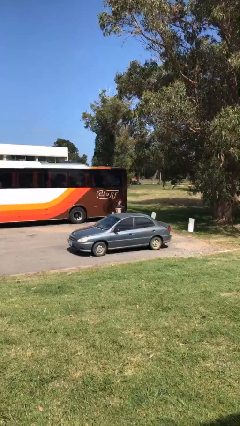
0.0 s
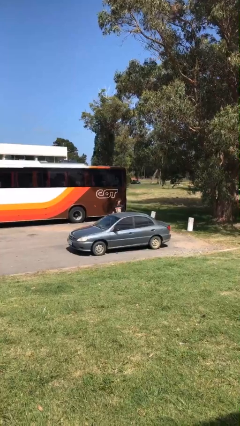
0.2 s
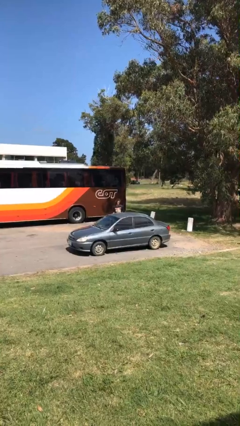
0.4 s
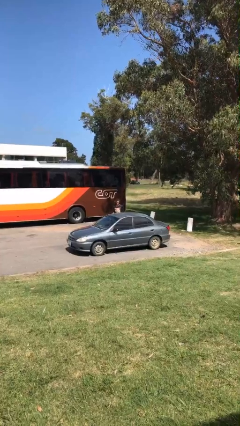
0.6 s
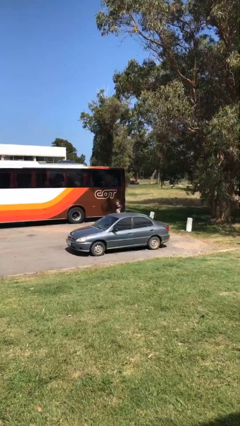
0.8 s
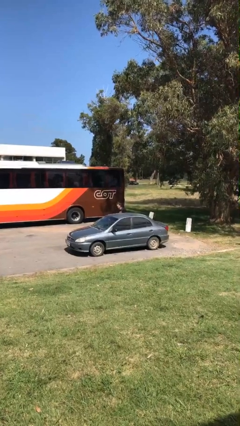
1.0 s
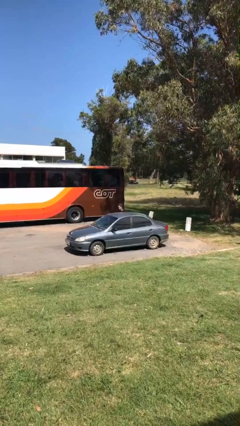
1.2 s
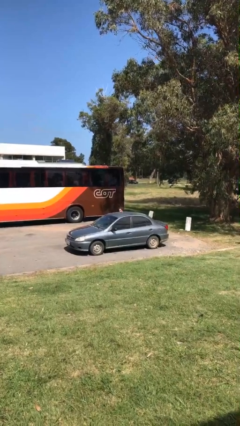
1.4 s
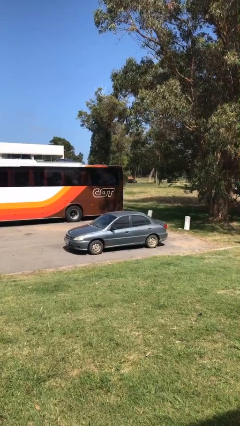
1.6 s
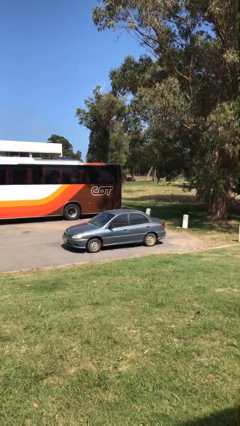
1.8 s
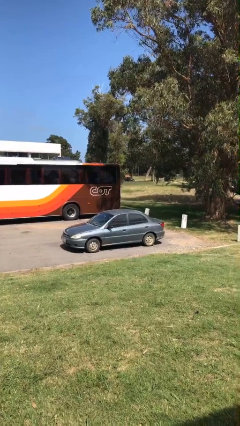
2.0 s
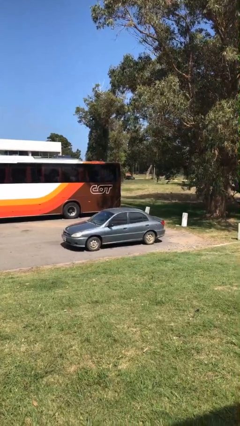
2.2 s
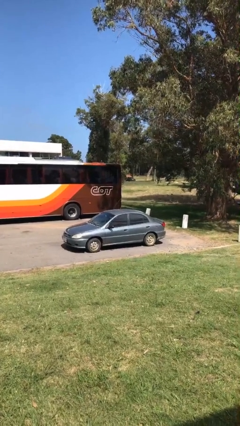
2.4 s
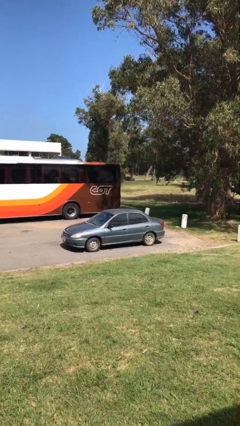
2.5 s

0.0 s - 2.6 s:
person enters car

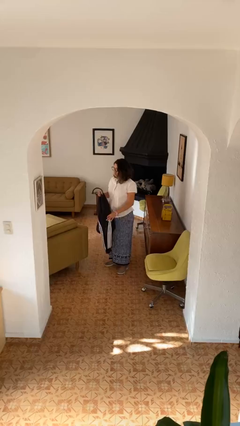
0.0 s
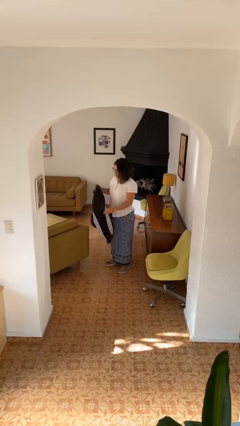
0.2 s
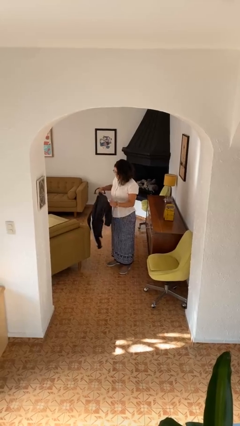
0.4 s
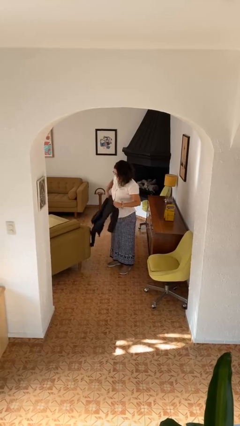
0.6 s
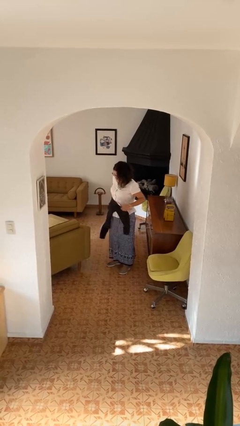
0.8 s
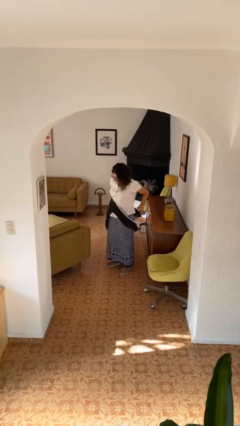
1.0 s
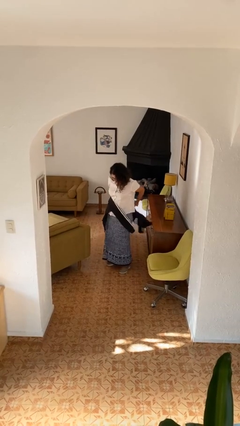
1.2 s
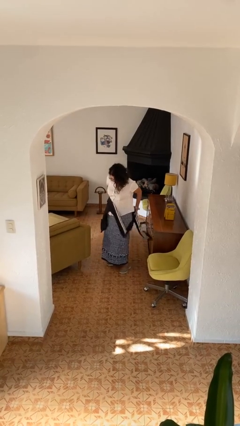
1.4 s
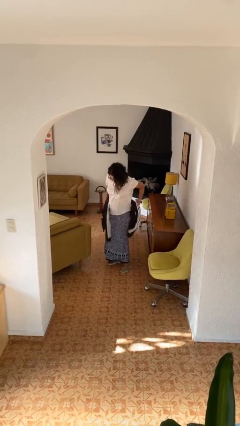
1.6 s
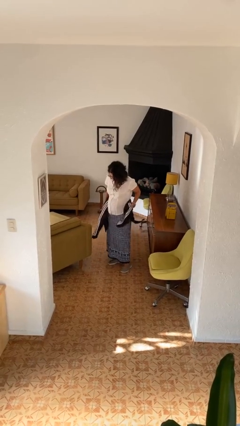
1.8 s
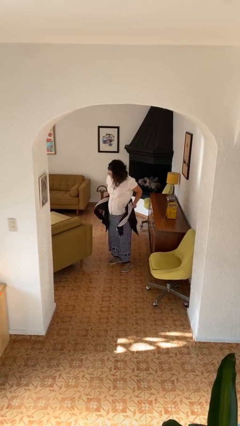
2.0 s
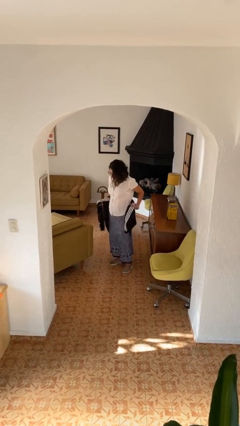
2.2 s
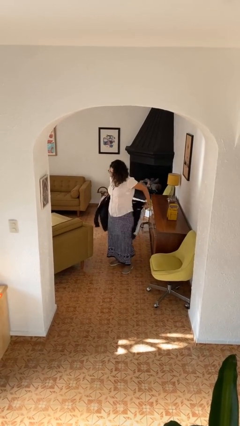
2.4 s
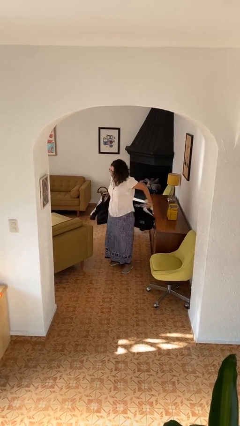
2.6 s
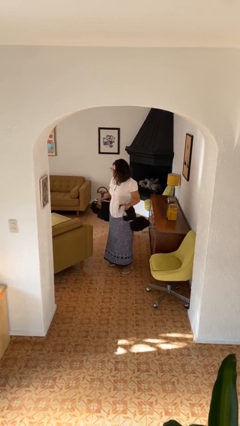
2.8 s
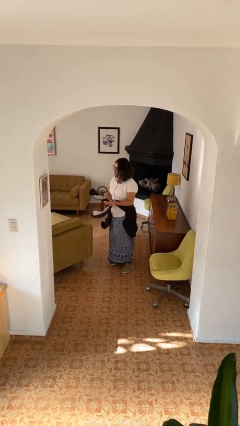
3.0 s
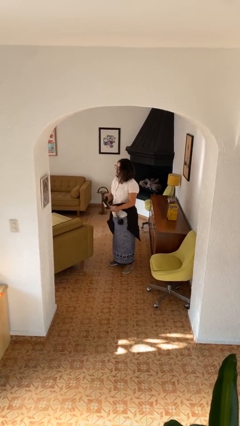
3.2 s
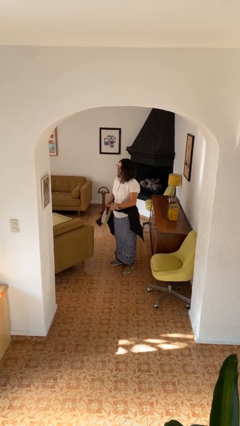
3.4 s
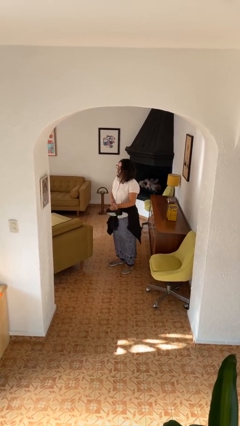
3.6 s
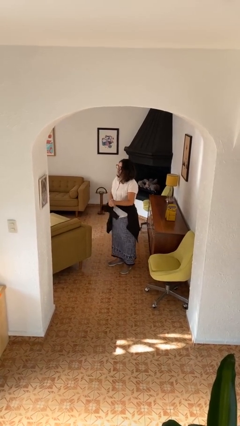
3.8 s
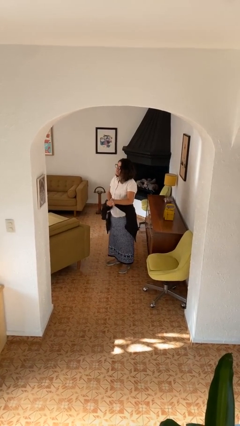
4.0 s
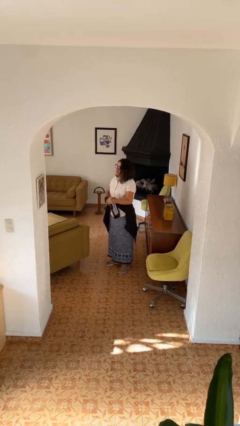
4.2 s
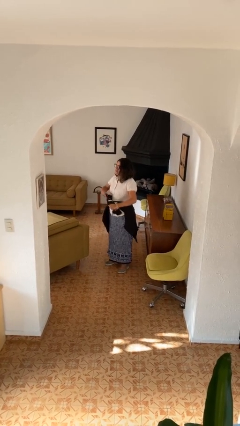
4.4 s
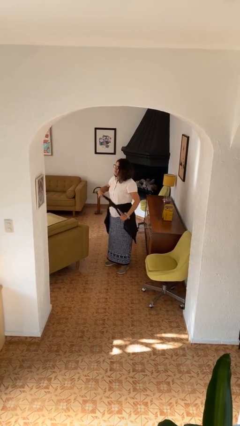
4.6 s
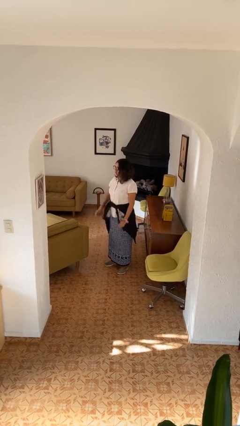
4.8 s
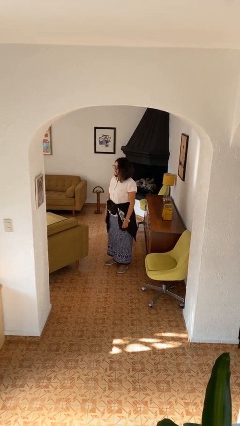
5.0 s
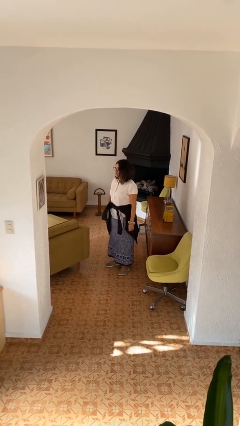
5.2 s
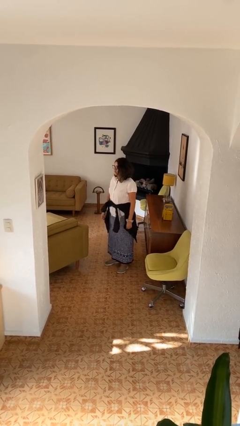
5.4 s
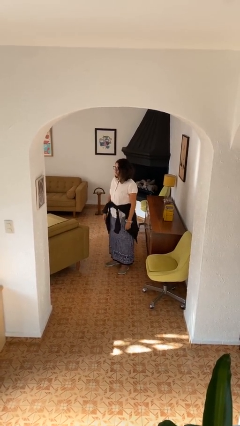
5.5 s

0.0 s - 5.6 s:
person ties jacket around waist

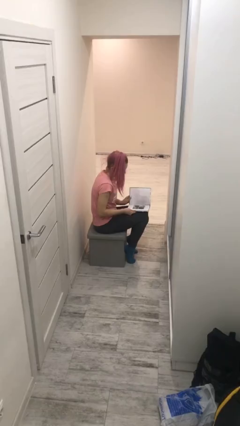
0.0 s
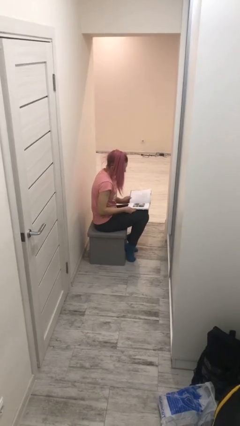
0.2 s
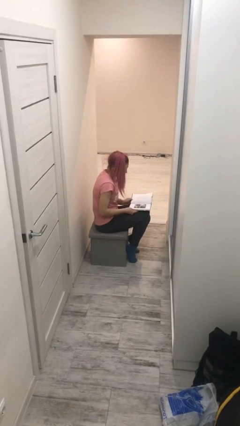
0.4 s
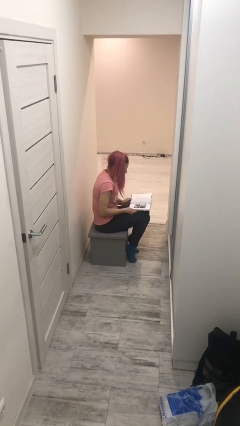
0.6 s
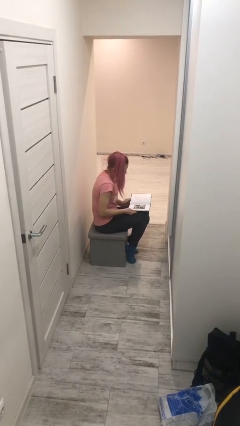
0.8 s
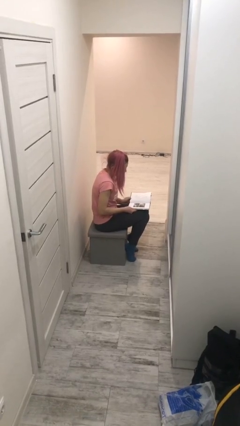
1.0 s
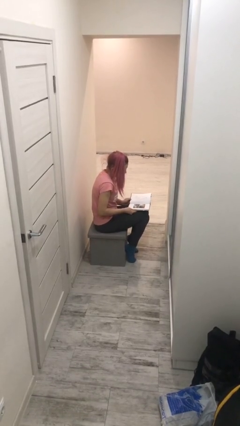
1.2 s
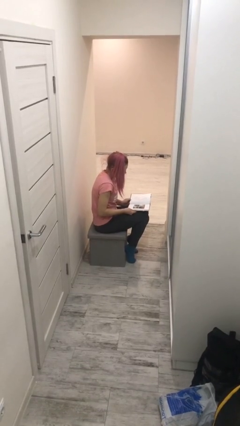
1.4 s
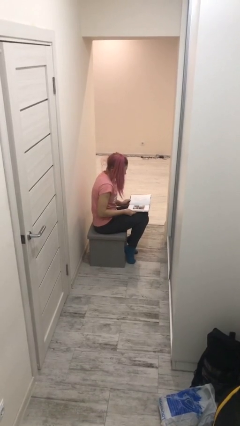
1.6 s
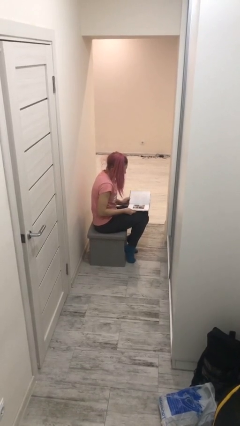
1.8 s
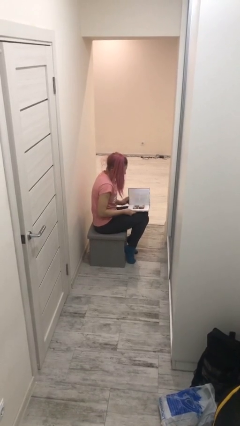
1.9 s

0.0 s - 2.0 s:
person reads document

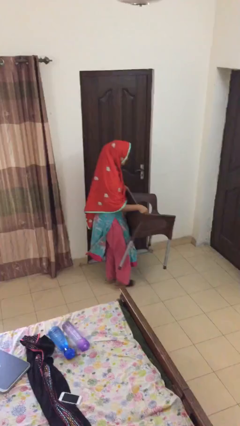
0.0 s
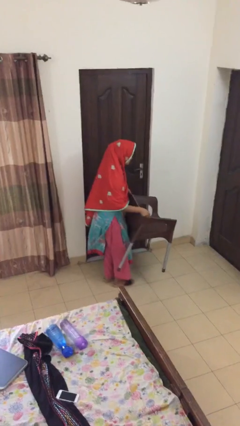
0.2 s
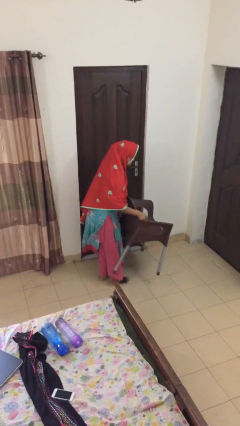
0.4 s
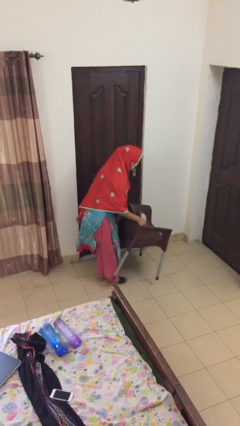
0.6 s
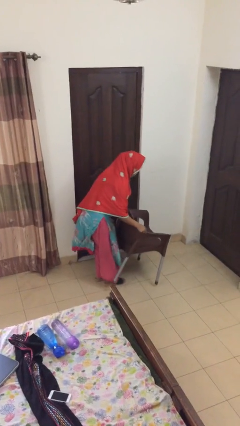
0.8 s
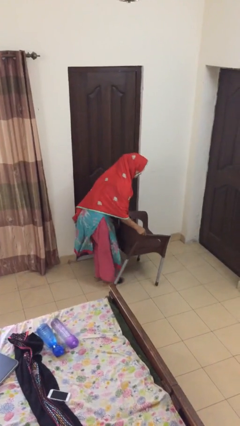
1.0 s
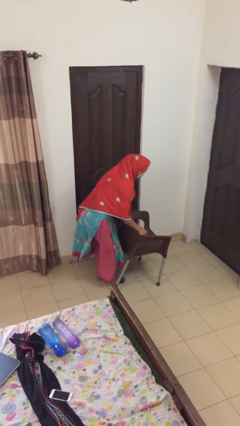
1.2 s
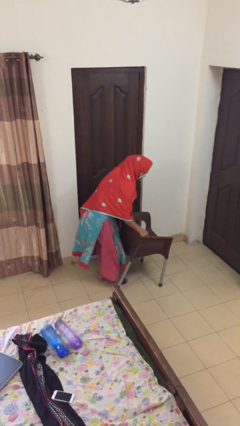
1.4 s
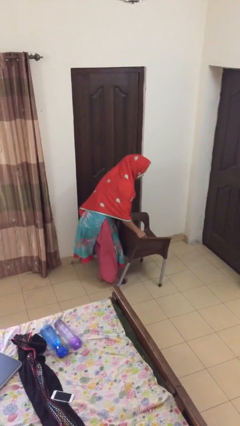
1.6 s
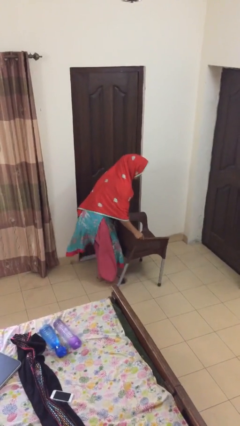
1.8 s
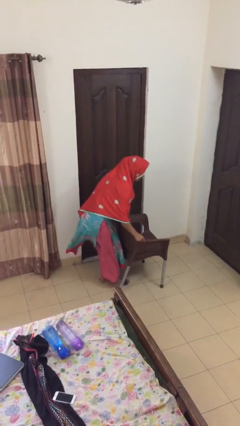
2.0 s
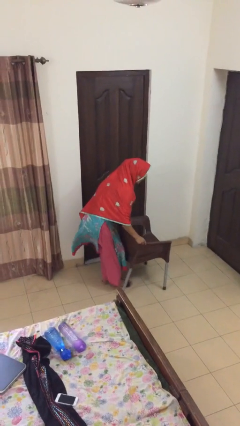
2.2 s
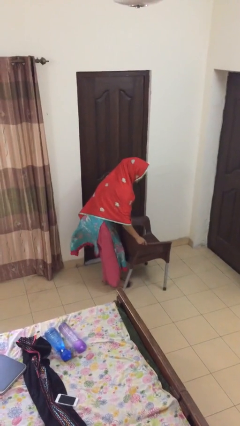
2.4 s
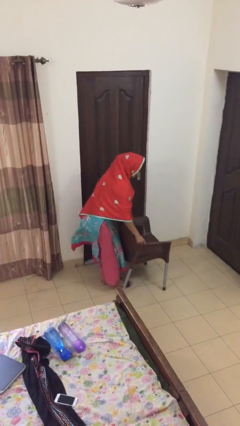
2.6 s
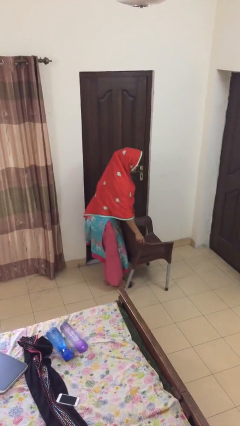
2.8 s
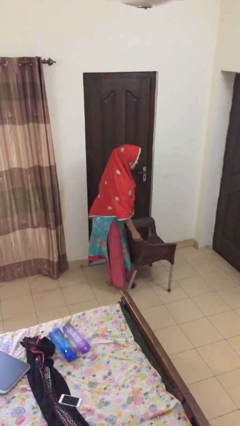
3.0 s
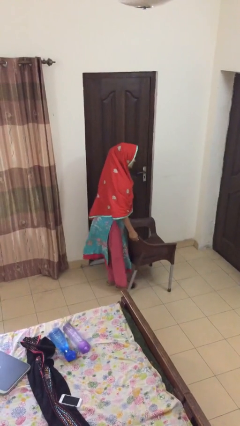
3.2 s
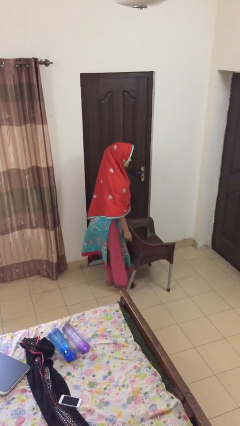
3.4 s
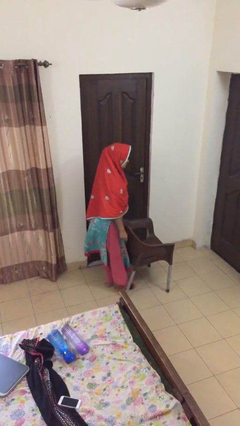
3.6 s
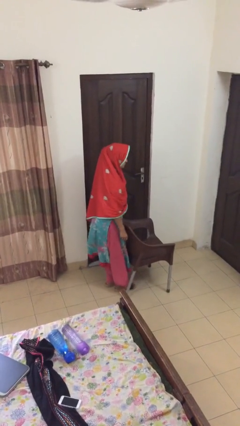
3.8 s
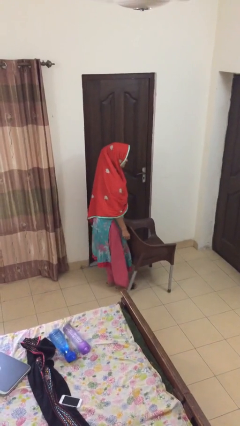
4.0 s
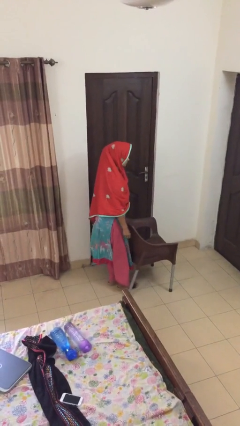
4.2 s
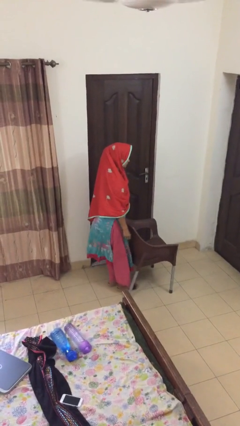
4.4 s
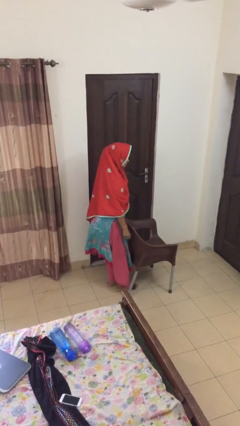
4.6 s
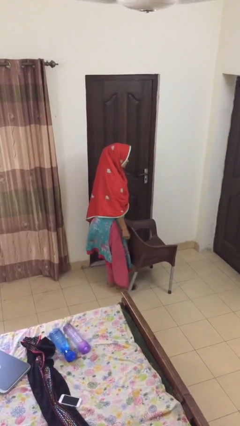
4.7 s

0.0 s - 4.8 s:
person puts down object on floor

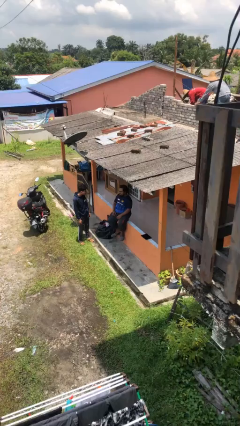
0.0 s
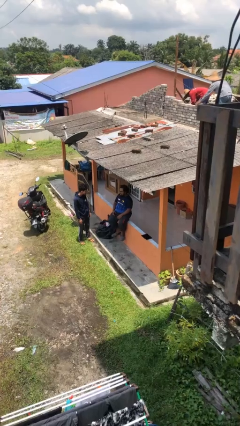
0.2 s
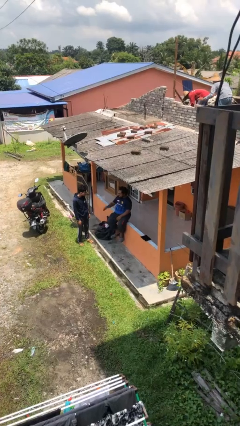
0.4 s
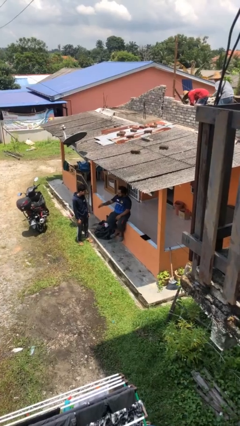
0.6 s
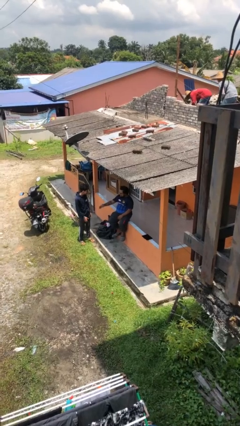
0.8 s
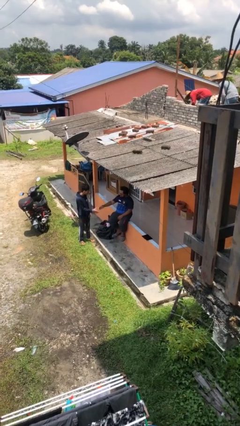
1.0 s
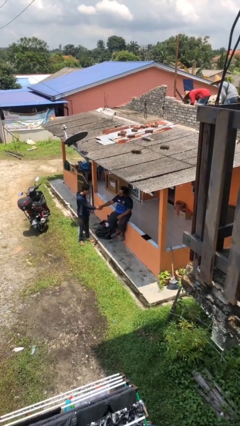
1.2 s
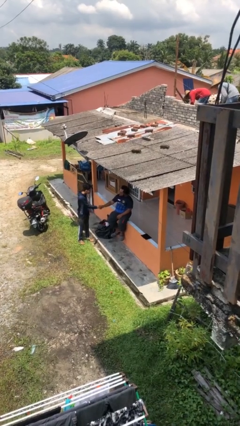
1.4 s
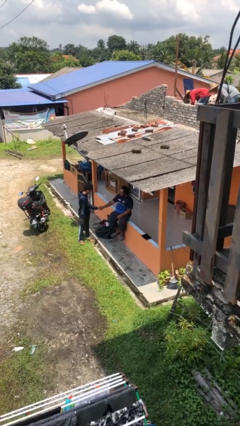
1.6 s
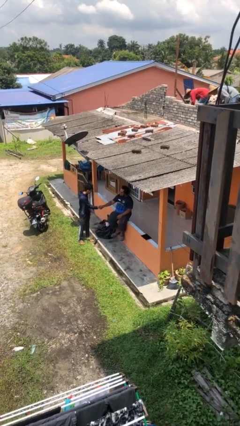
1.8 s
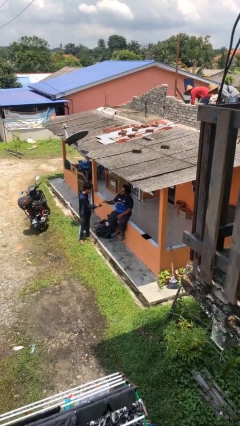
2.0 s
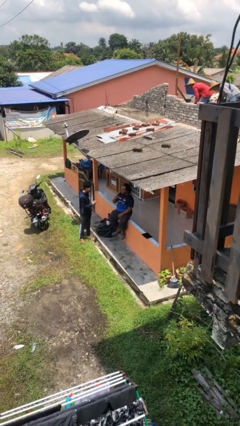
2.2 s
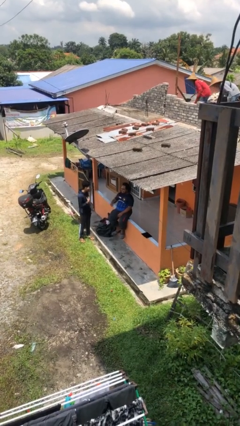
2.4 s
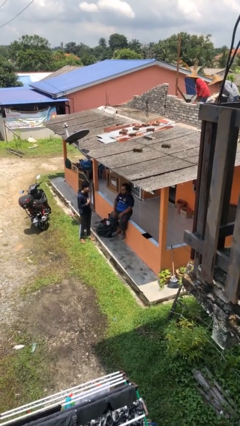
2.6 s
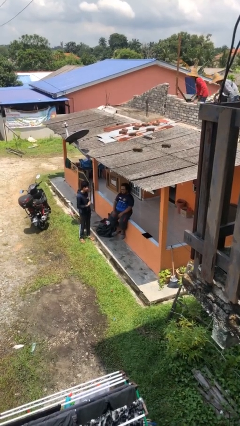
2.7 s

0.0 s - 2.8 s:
person shakes hand
